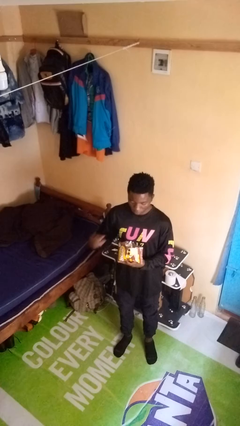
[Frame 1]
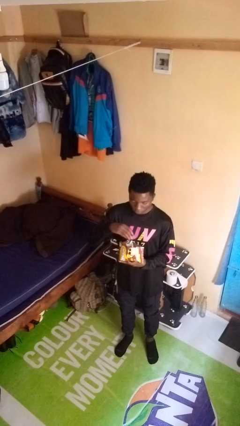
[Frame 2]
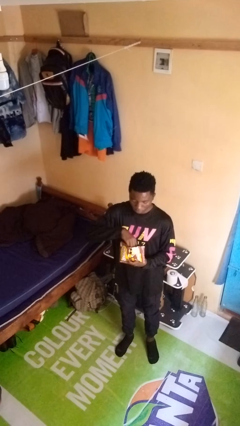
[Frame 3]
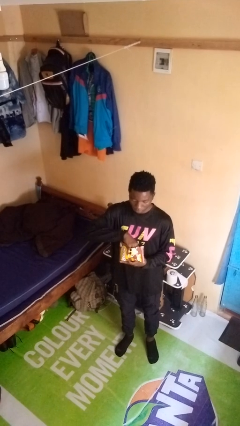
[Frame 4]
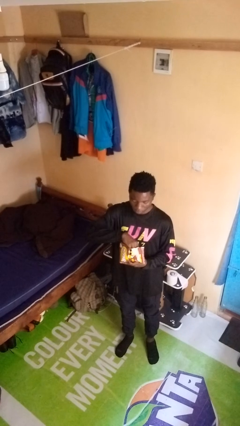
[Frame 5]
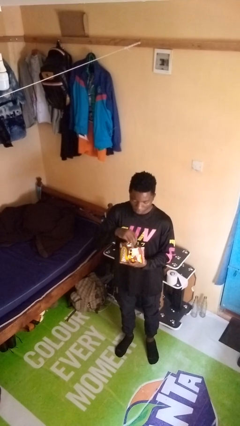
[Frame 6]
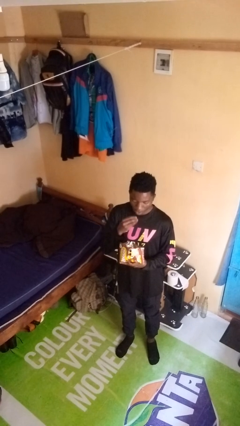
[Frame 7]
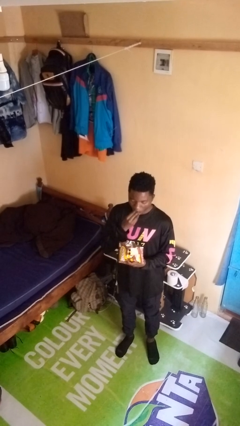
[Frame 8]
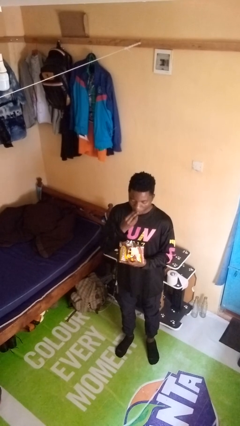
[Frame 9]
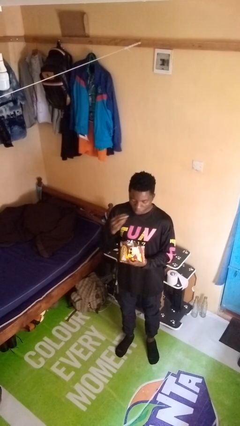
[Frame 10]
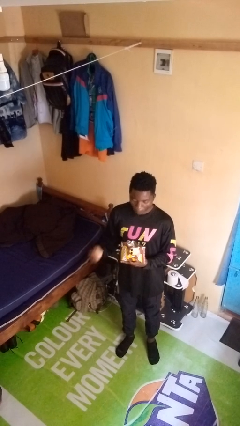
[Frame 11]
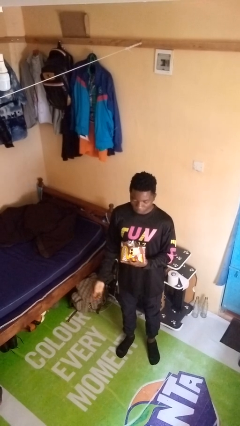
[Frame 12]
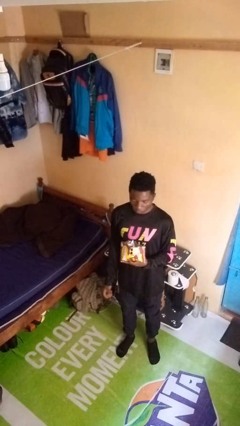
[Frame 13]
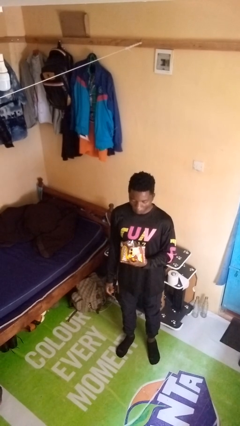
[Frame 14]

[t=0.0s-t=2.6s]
person eats snack from bag

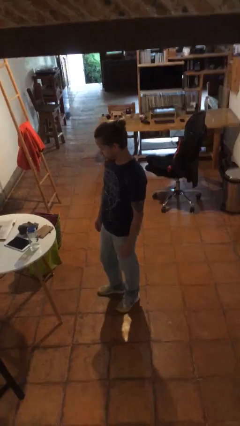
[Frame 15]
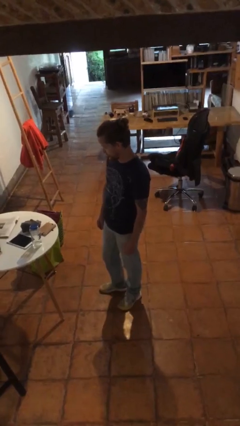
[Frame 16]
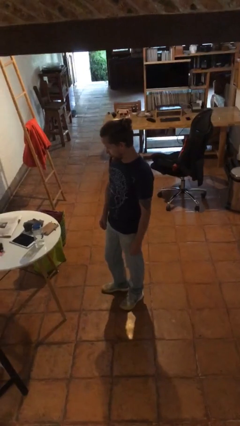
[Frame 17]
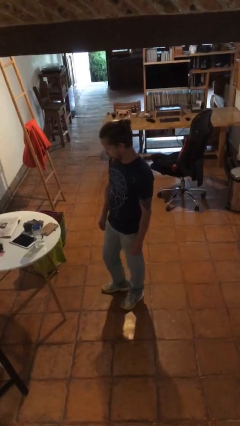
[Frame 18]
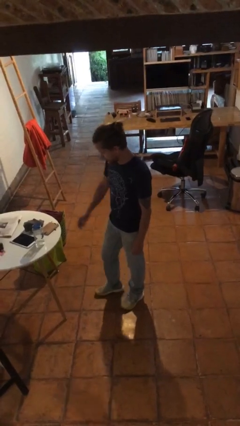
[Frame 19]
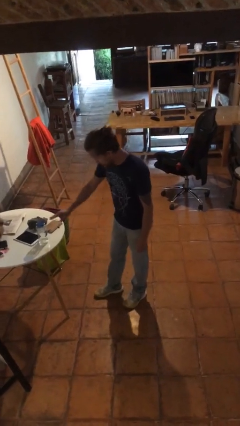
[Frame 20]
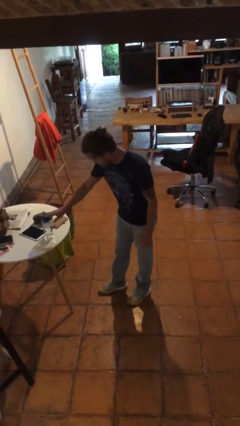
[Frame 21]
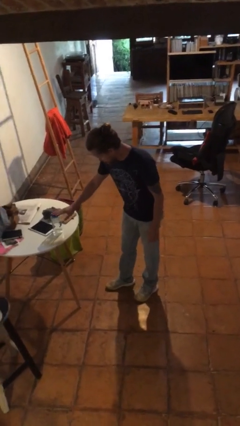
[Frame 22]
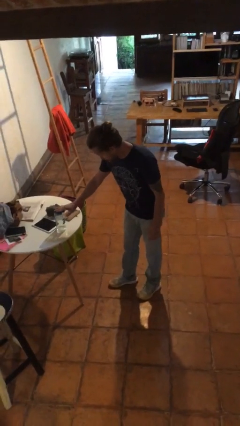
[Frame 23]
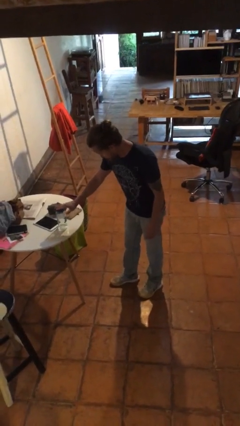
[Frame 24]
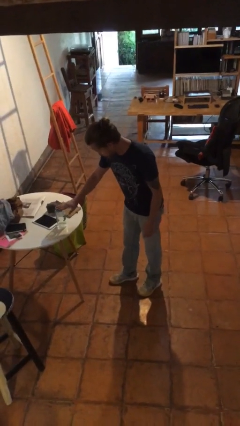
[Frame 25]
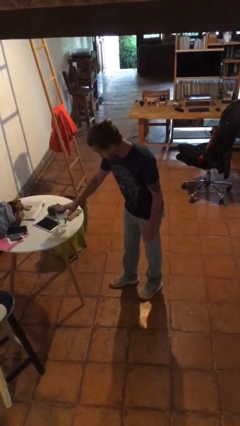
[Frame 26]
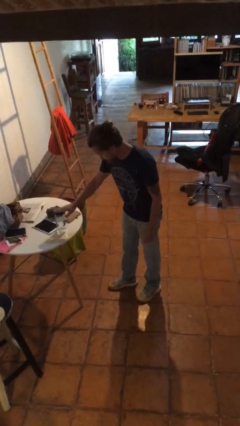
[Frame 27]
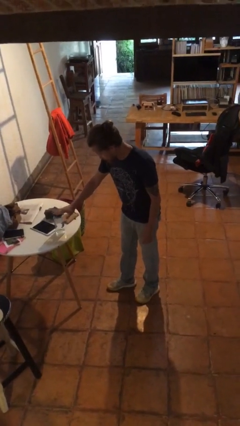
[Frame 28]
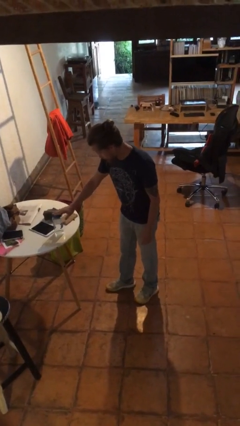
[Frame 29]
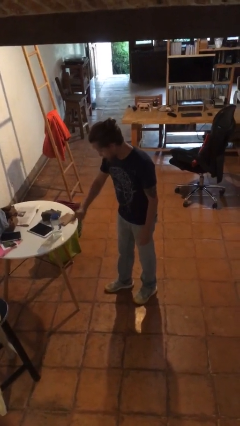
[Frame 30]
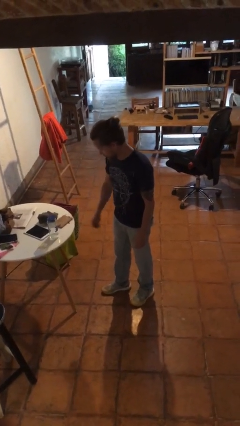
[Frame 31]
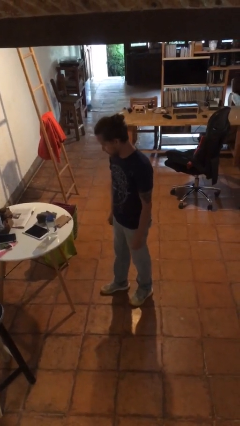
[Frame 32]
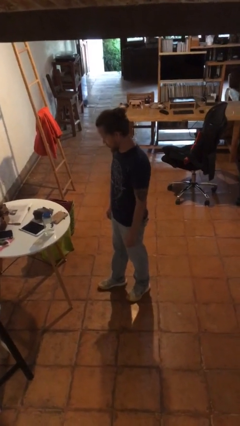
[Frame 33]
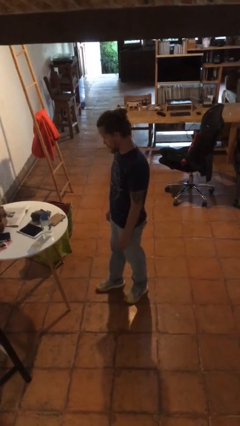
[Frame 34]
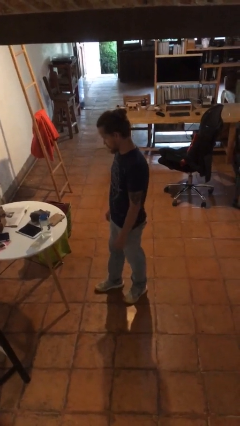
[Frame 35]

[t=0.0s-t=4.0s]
person waves hand over object

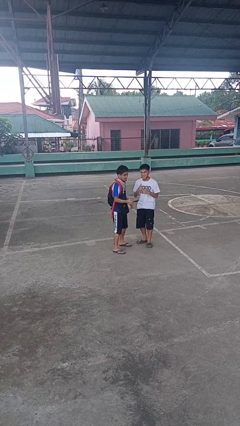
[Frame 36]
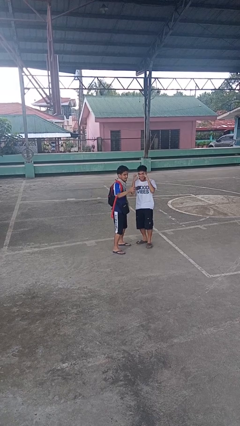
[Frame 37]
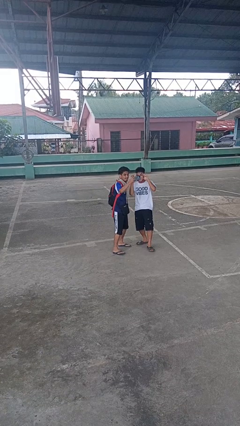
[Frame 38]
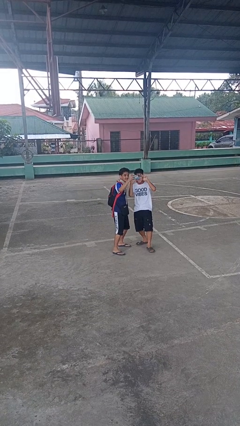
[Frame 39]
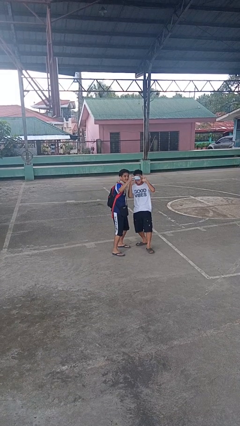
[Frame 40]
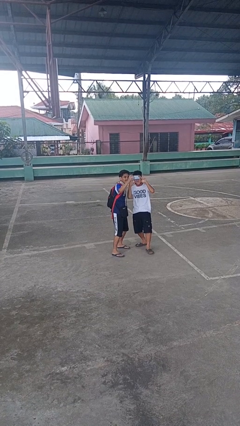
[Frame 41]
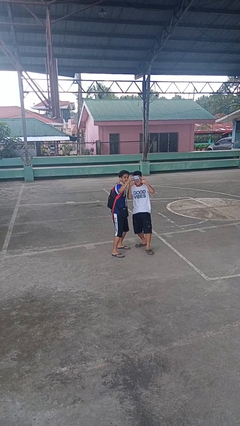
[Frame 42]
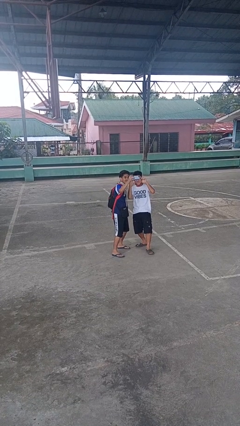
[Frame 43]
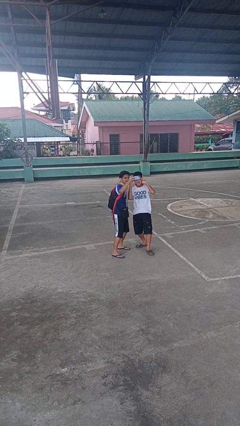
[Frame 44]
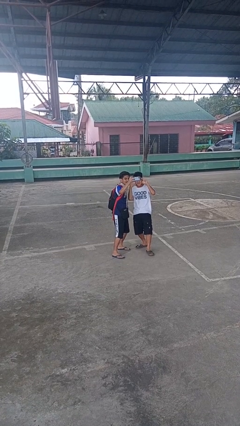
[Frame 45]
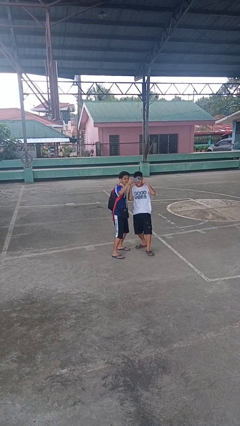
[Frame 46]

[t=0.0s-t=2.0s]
person takes selfie with person

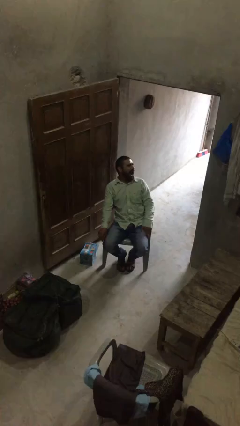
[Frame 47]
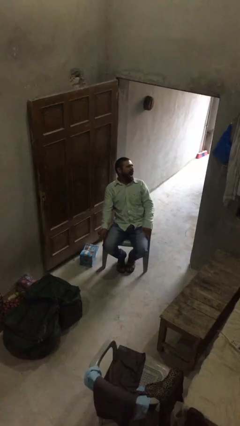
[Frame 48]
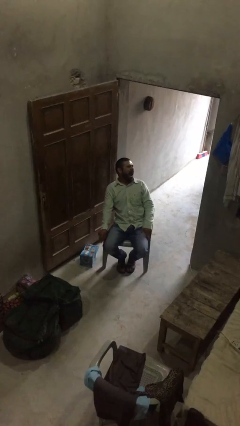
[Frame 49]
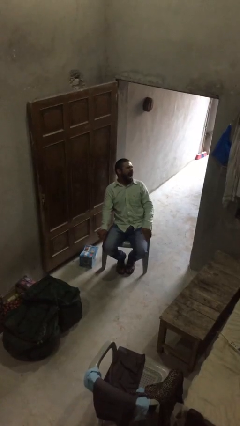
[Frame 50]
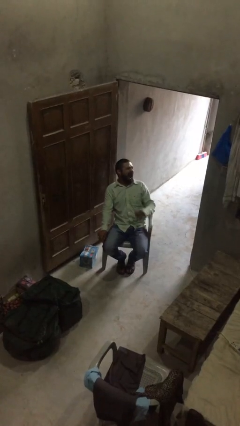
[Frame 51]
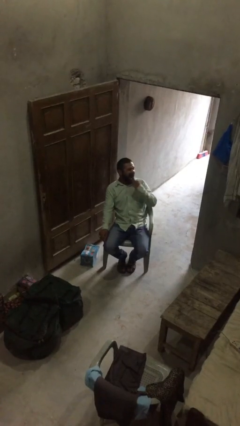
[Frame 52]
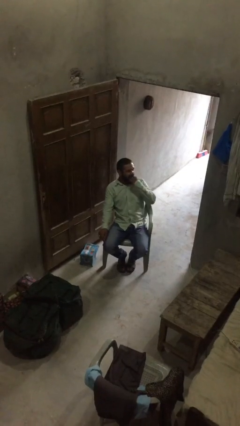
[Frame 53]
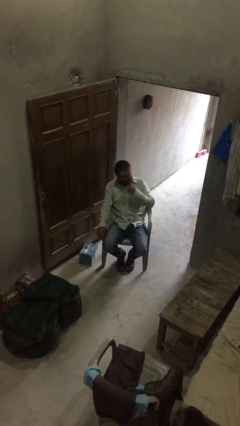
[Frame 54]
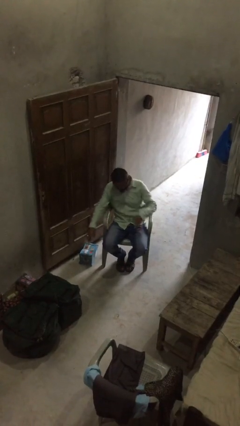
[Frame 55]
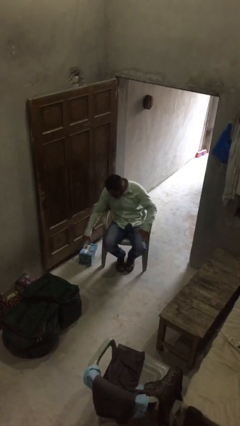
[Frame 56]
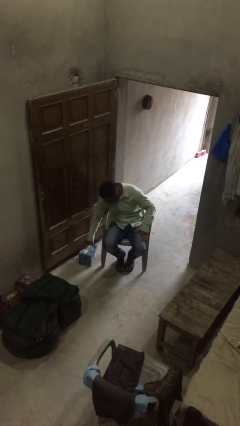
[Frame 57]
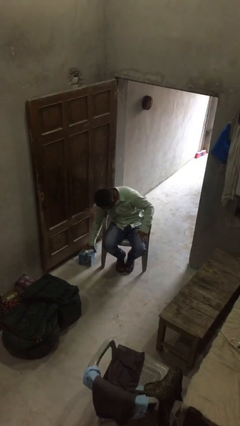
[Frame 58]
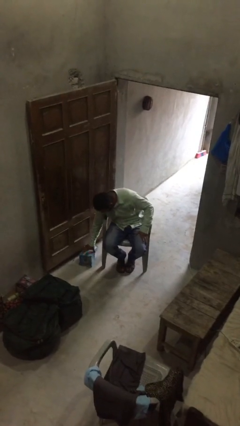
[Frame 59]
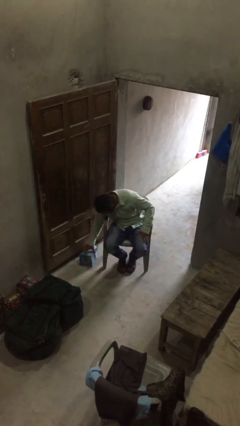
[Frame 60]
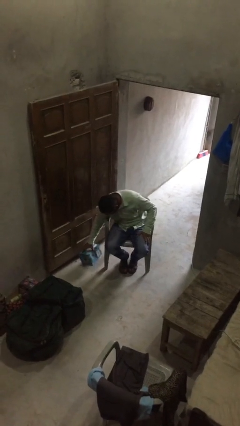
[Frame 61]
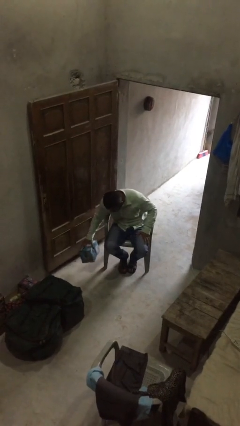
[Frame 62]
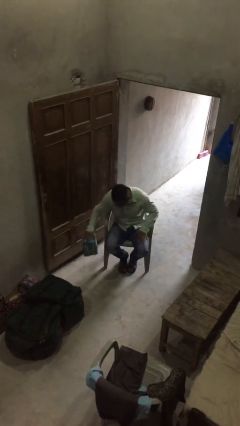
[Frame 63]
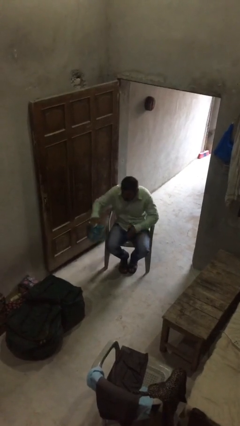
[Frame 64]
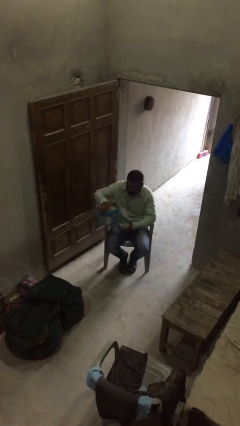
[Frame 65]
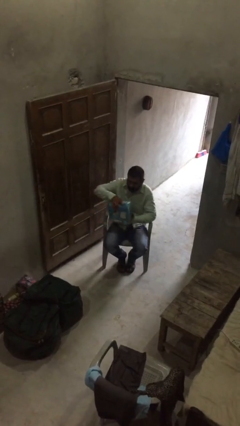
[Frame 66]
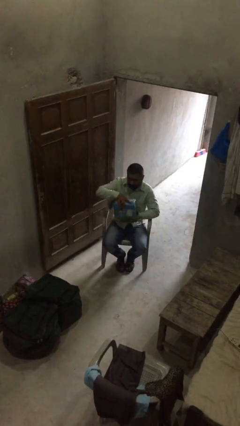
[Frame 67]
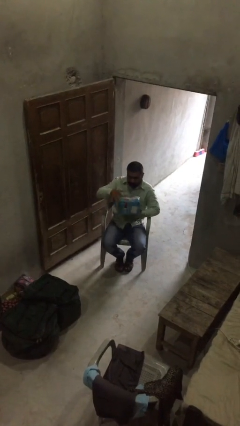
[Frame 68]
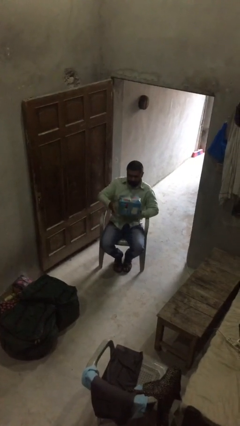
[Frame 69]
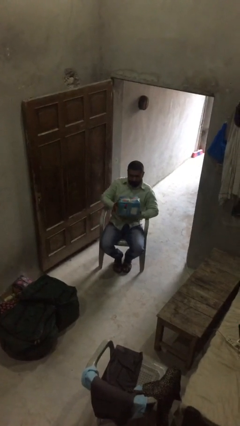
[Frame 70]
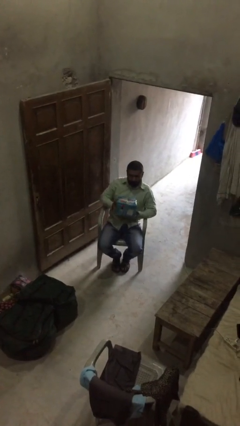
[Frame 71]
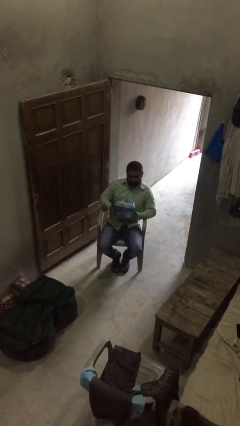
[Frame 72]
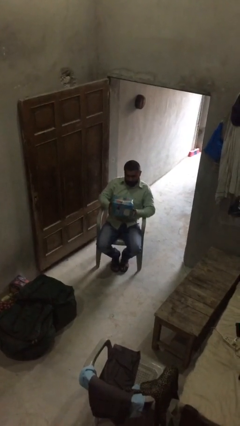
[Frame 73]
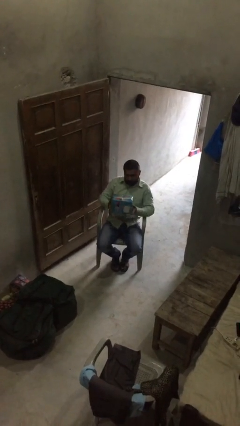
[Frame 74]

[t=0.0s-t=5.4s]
person picks up object from floor

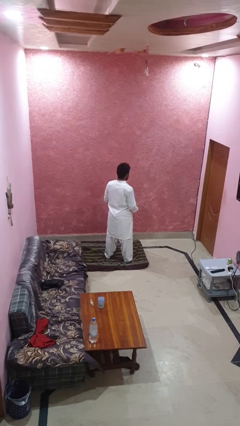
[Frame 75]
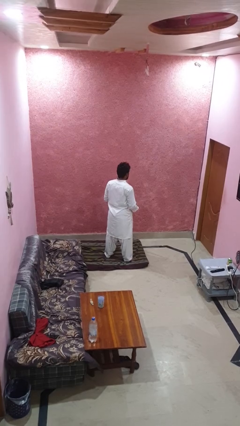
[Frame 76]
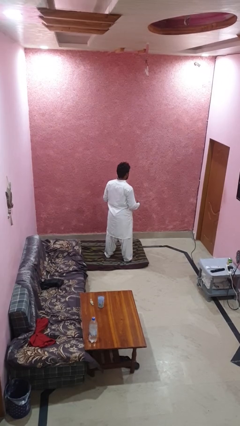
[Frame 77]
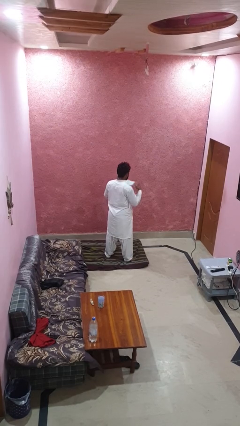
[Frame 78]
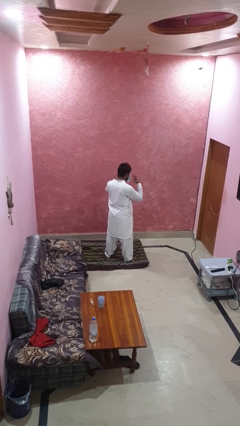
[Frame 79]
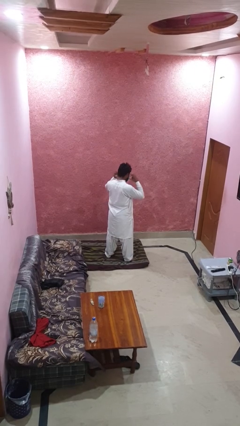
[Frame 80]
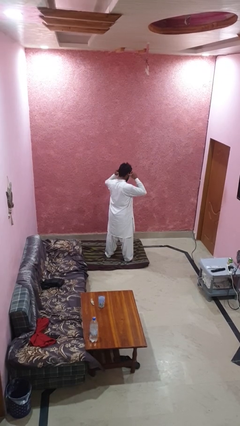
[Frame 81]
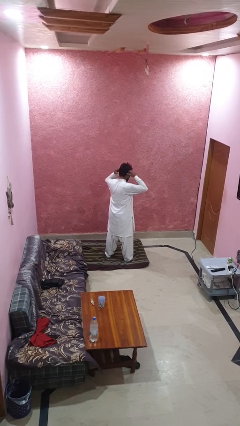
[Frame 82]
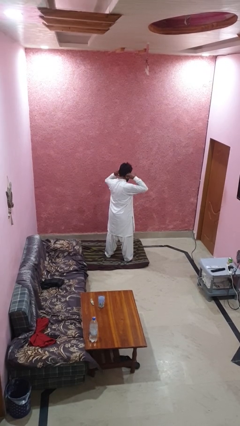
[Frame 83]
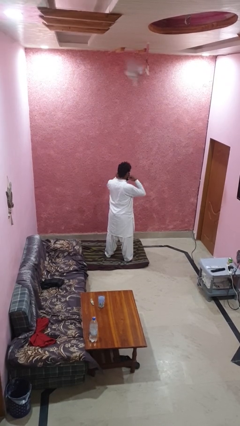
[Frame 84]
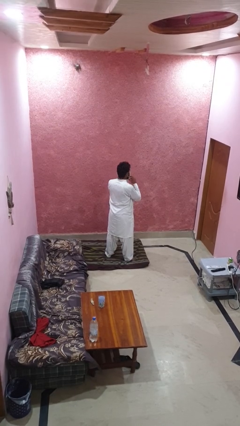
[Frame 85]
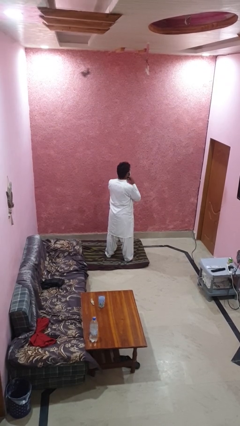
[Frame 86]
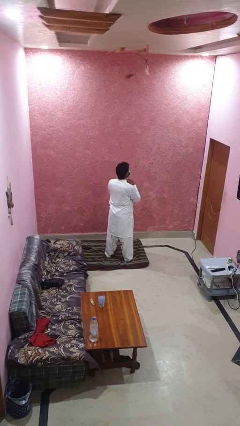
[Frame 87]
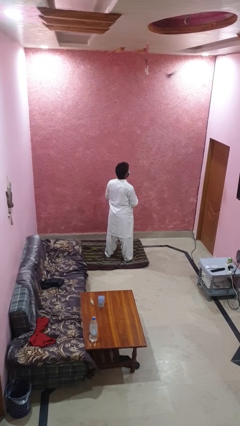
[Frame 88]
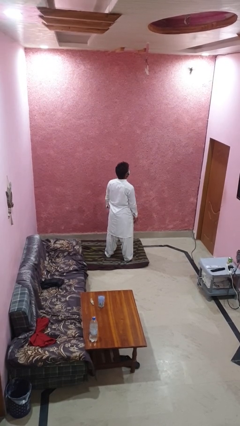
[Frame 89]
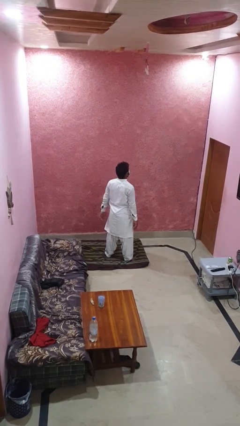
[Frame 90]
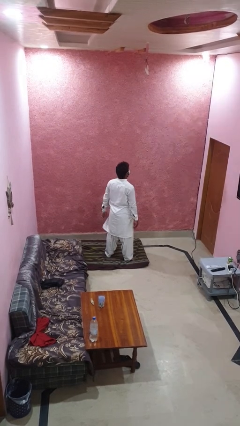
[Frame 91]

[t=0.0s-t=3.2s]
person puts on facemask
